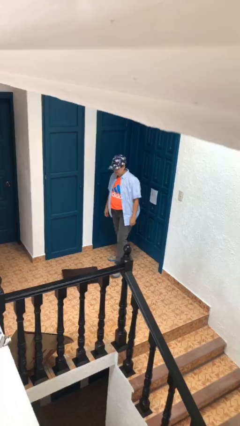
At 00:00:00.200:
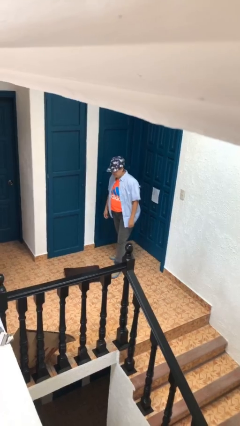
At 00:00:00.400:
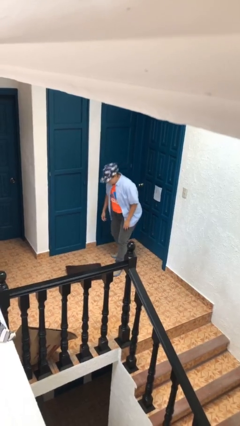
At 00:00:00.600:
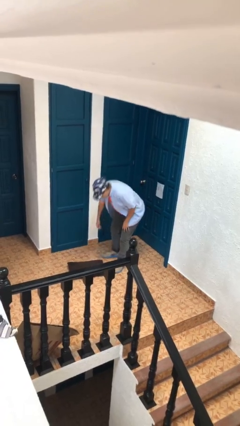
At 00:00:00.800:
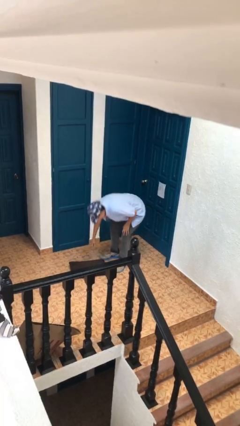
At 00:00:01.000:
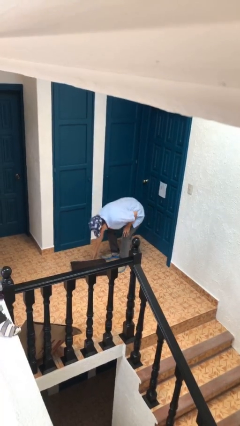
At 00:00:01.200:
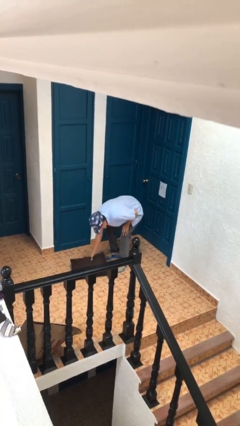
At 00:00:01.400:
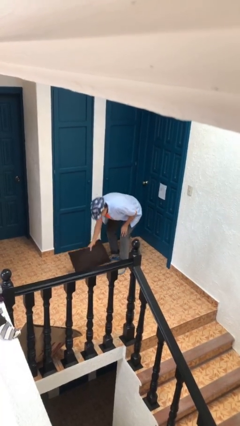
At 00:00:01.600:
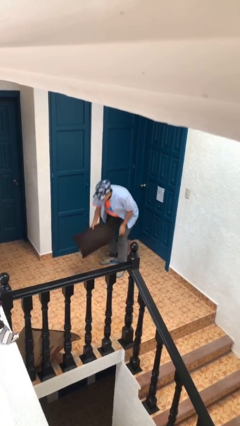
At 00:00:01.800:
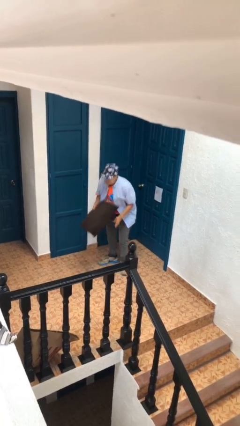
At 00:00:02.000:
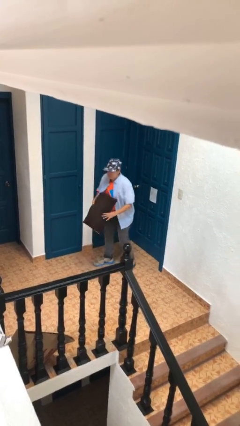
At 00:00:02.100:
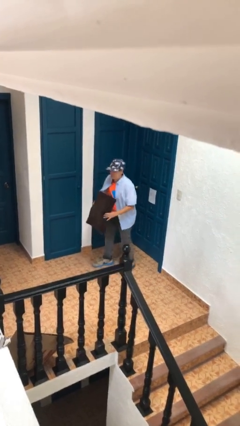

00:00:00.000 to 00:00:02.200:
person picks up object from floor

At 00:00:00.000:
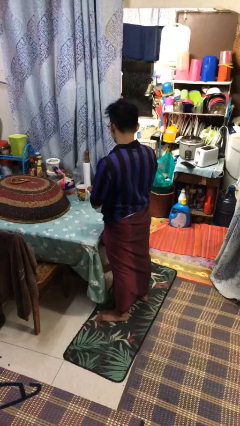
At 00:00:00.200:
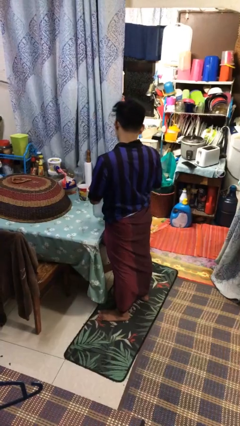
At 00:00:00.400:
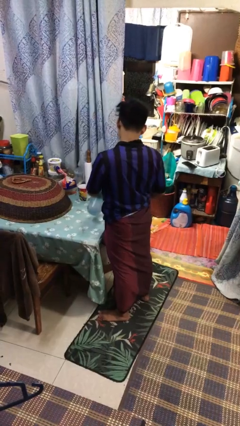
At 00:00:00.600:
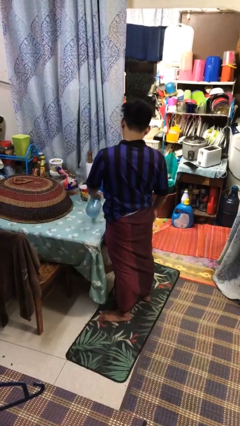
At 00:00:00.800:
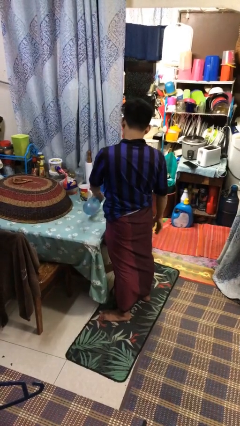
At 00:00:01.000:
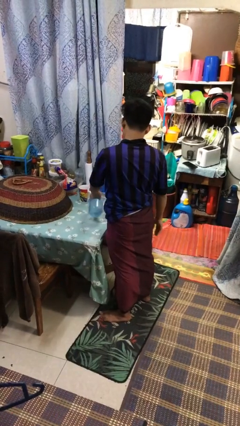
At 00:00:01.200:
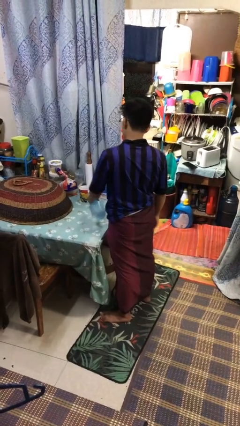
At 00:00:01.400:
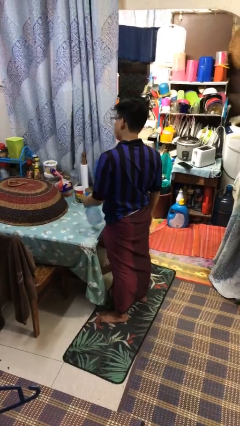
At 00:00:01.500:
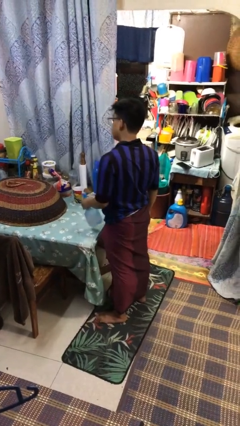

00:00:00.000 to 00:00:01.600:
person sprays from bottle

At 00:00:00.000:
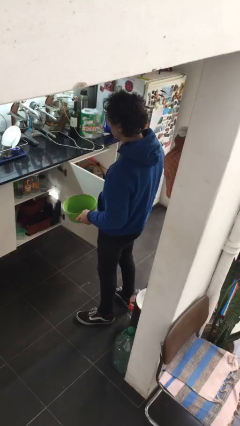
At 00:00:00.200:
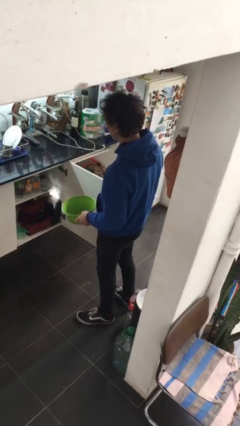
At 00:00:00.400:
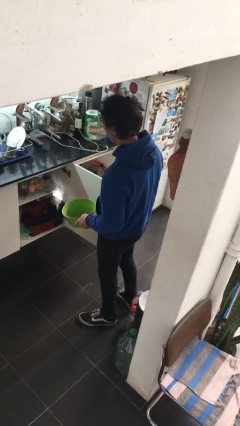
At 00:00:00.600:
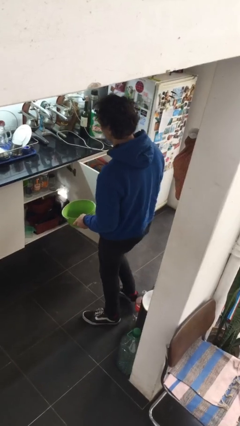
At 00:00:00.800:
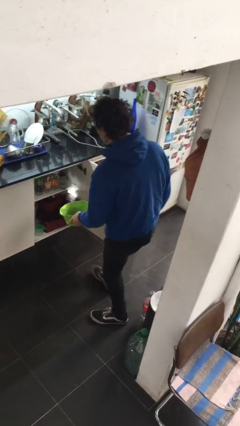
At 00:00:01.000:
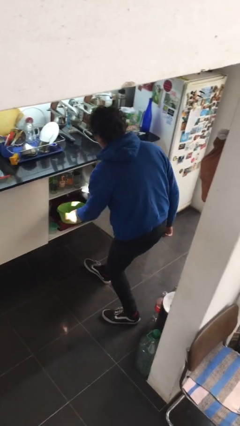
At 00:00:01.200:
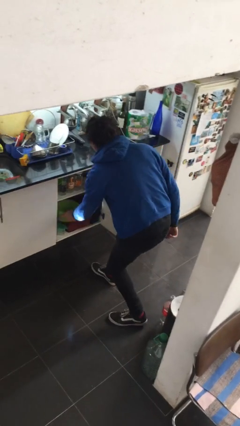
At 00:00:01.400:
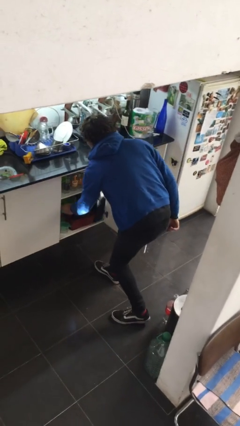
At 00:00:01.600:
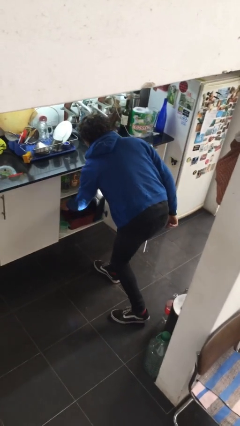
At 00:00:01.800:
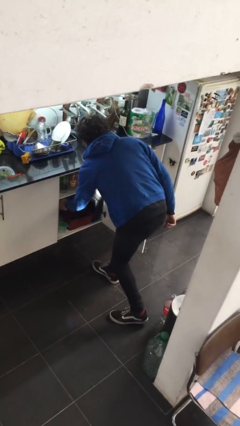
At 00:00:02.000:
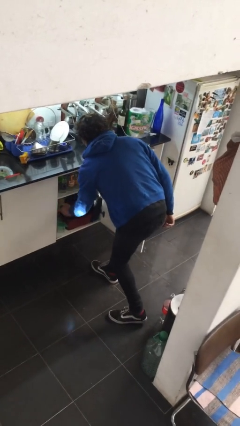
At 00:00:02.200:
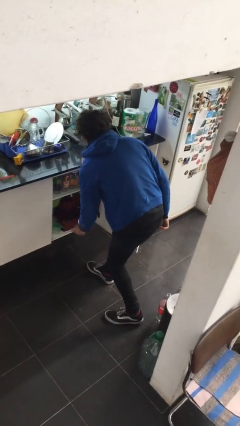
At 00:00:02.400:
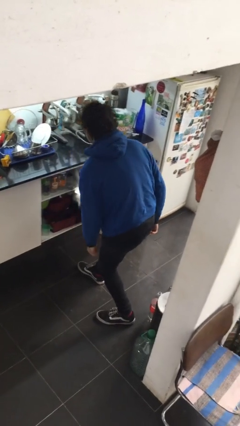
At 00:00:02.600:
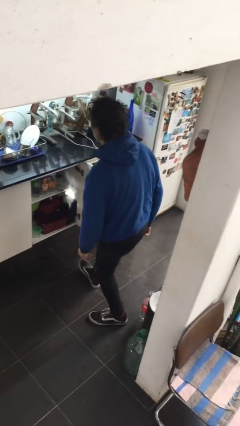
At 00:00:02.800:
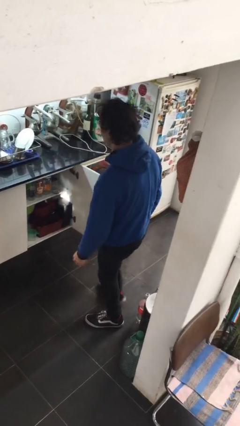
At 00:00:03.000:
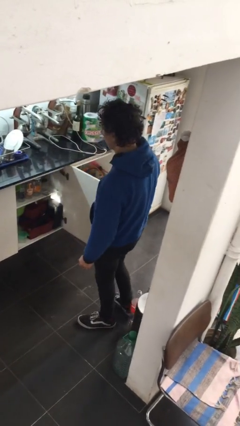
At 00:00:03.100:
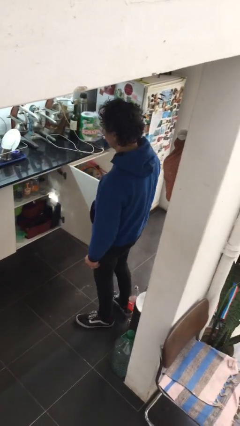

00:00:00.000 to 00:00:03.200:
person puts down object into cabinet

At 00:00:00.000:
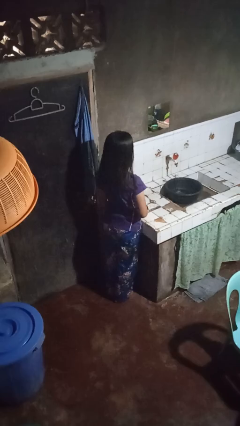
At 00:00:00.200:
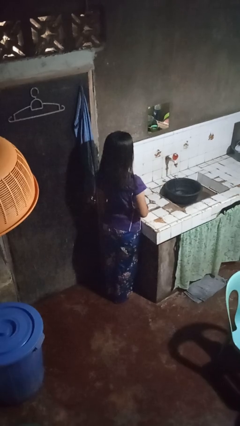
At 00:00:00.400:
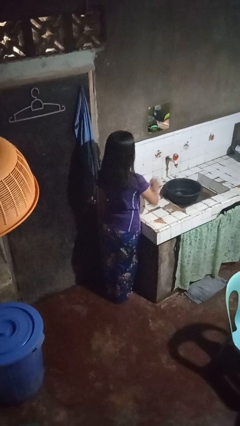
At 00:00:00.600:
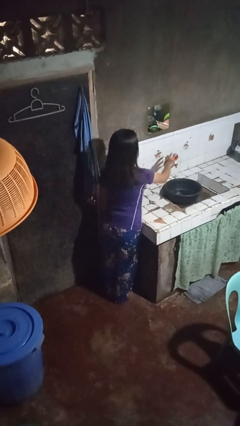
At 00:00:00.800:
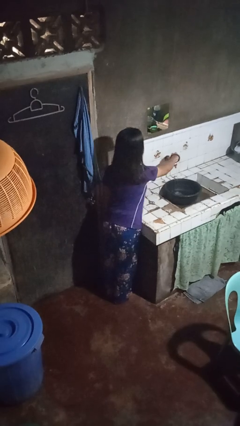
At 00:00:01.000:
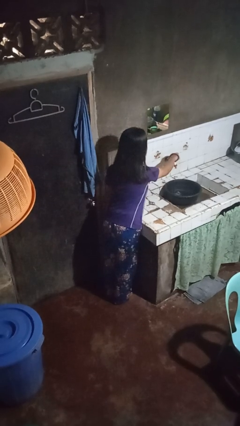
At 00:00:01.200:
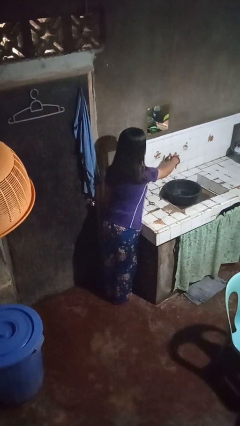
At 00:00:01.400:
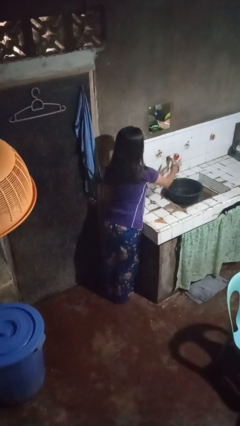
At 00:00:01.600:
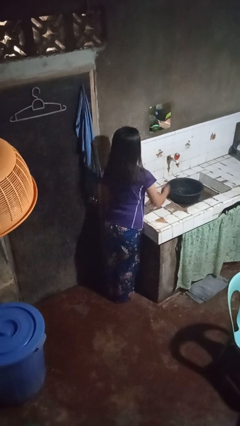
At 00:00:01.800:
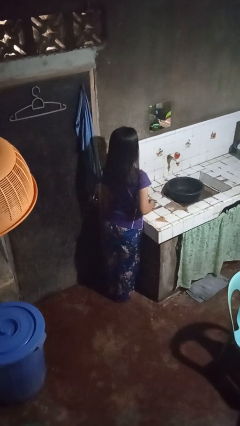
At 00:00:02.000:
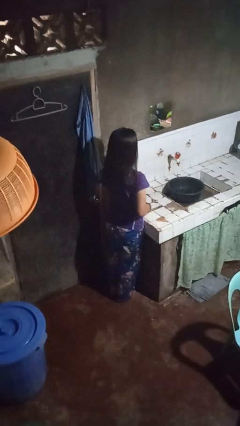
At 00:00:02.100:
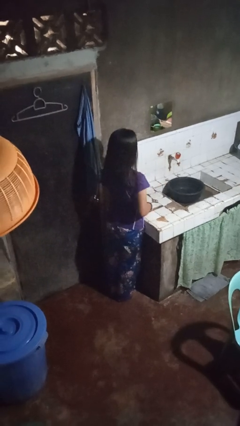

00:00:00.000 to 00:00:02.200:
person turns off faucet

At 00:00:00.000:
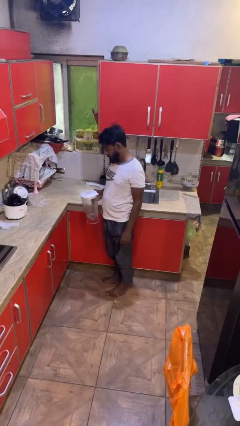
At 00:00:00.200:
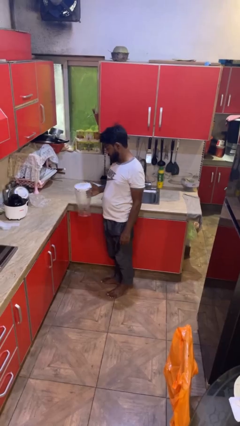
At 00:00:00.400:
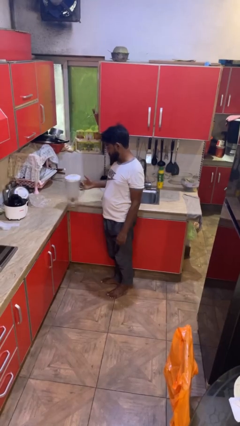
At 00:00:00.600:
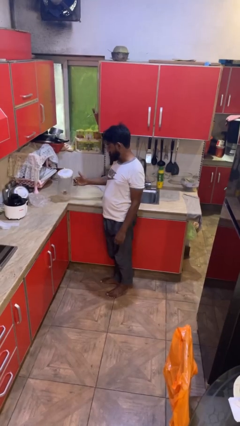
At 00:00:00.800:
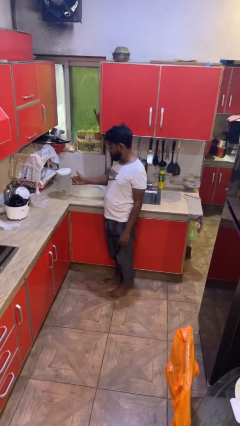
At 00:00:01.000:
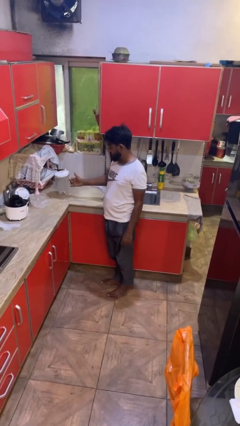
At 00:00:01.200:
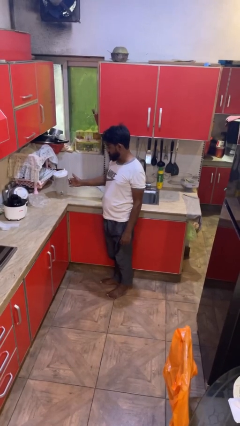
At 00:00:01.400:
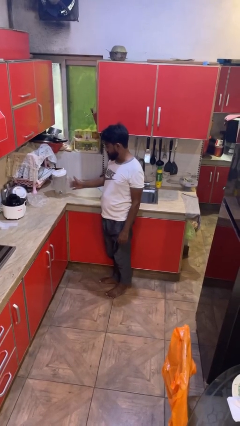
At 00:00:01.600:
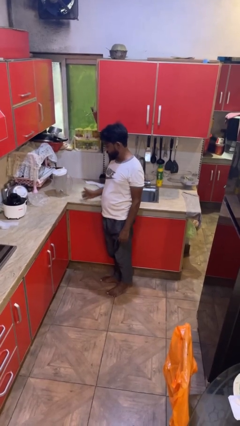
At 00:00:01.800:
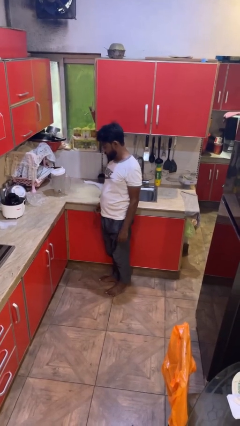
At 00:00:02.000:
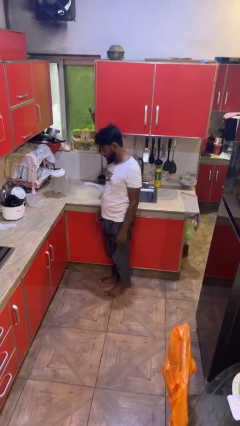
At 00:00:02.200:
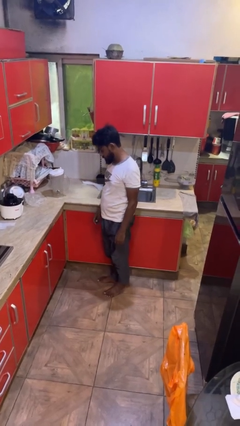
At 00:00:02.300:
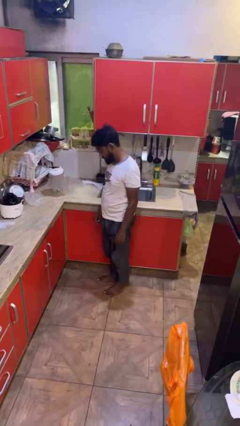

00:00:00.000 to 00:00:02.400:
person puts down object on countertop

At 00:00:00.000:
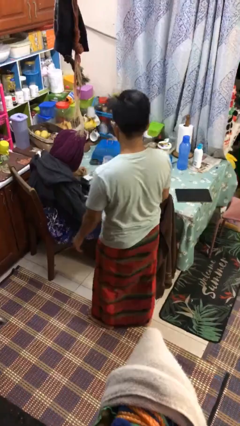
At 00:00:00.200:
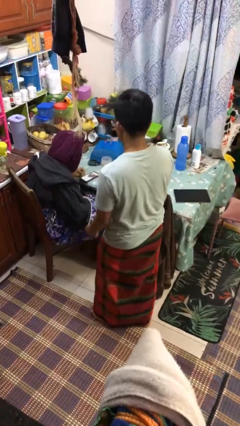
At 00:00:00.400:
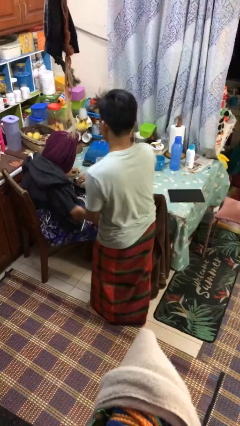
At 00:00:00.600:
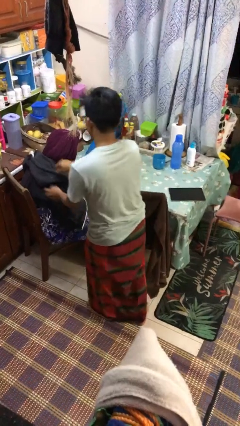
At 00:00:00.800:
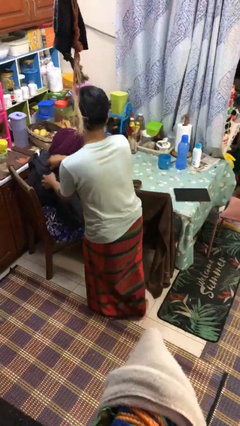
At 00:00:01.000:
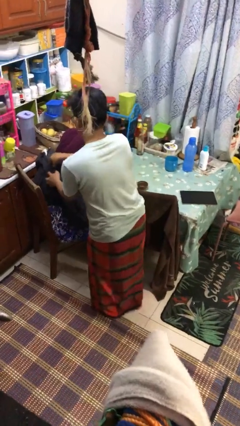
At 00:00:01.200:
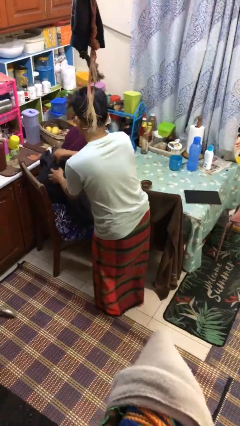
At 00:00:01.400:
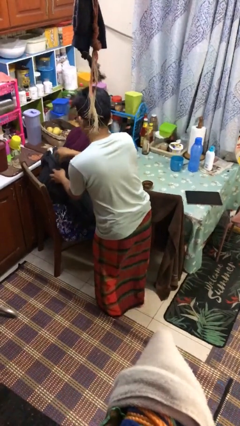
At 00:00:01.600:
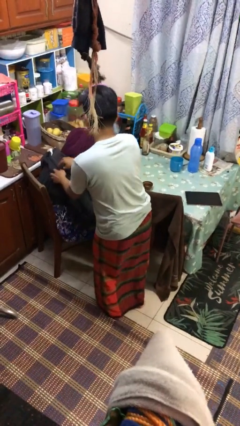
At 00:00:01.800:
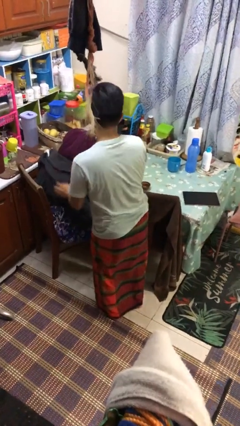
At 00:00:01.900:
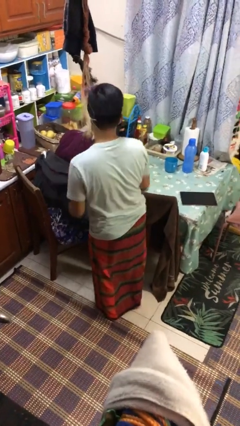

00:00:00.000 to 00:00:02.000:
person tickles person

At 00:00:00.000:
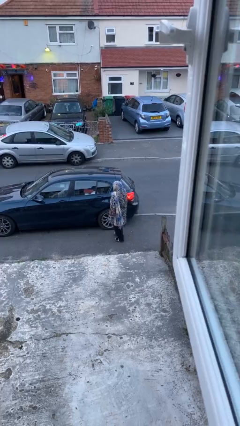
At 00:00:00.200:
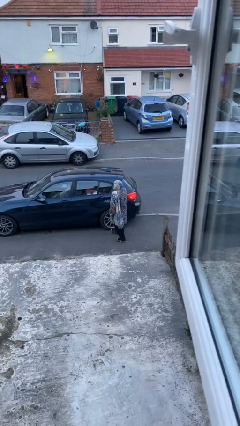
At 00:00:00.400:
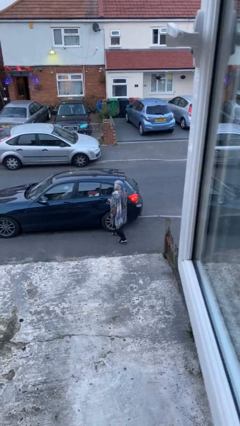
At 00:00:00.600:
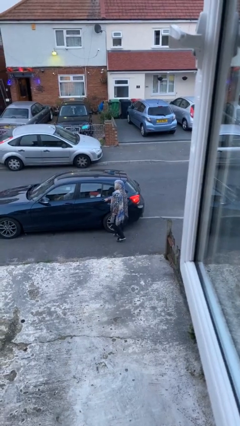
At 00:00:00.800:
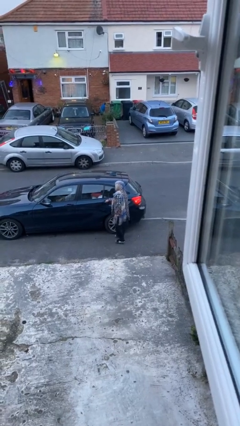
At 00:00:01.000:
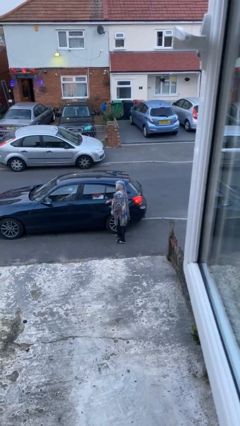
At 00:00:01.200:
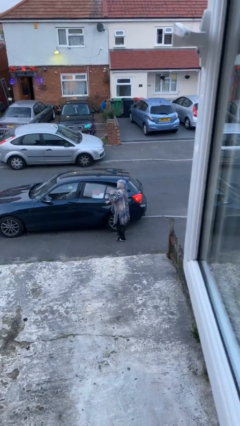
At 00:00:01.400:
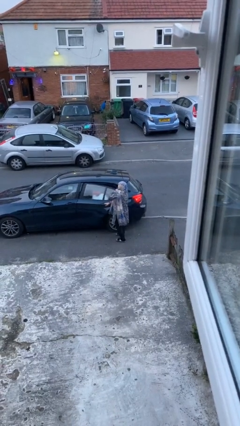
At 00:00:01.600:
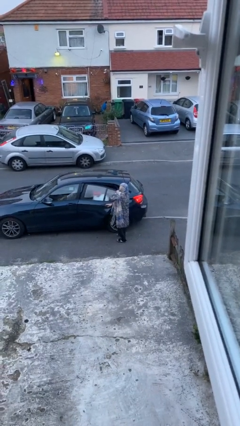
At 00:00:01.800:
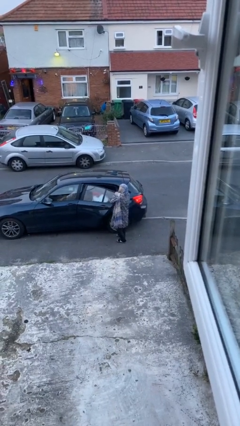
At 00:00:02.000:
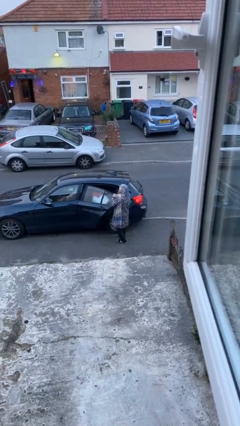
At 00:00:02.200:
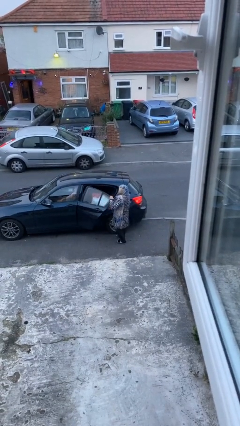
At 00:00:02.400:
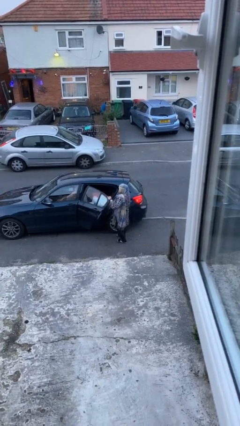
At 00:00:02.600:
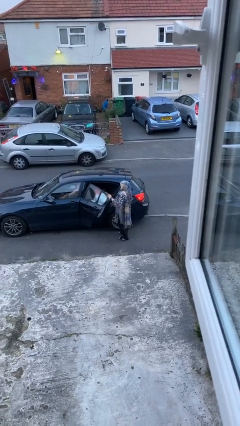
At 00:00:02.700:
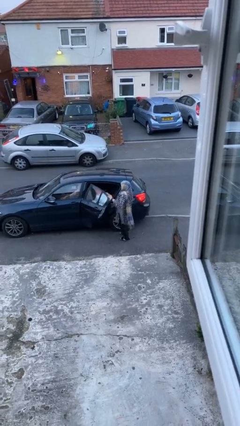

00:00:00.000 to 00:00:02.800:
person opens car door

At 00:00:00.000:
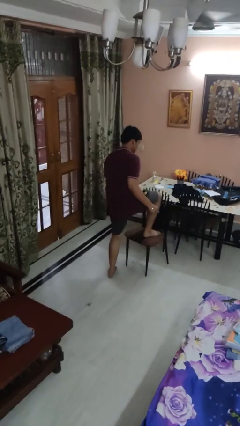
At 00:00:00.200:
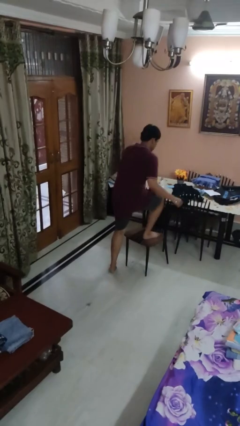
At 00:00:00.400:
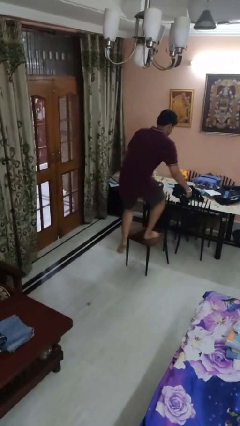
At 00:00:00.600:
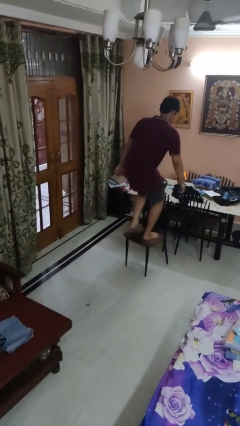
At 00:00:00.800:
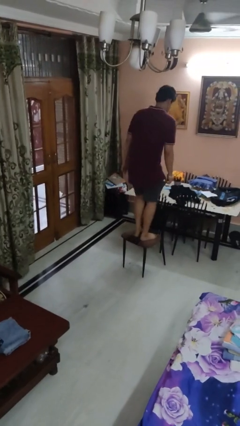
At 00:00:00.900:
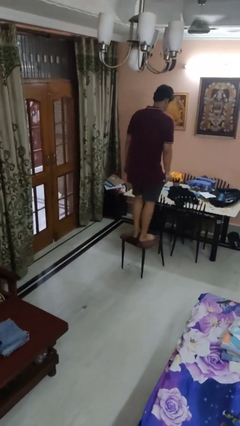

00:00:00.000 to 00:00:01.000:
person climbs on chair
